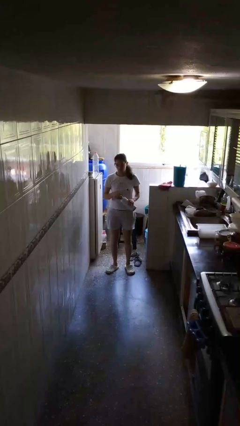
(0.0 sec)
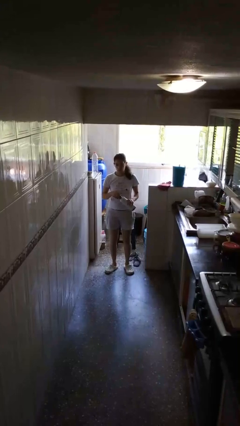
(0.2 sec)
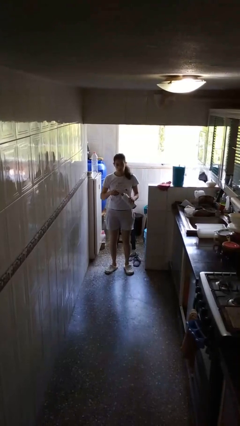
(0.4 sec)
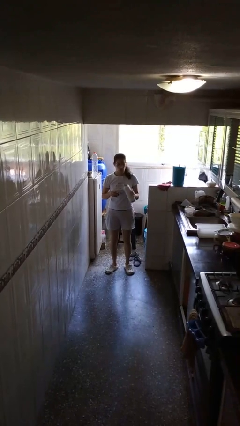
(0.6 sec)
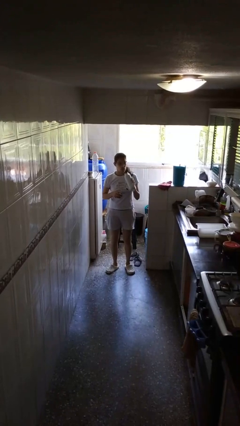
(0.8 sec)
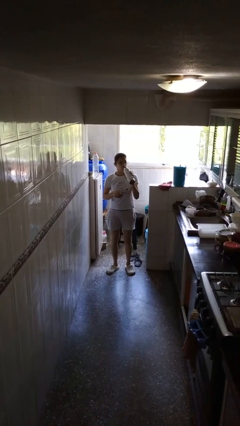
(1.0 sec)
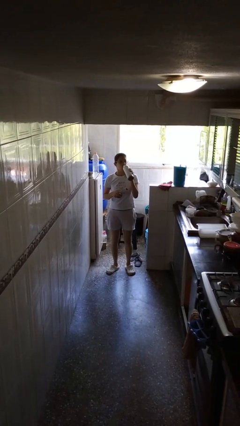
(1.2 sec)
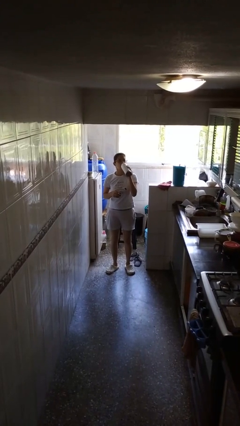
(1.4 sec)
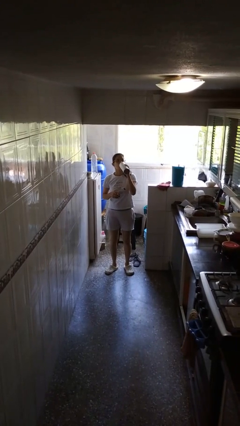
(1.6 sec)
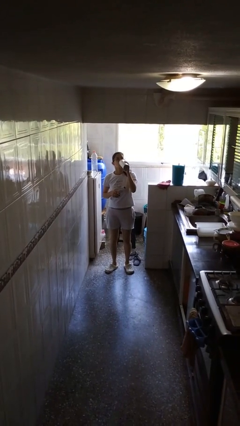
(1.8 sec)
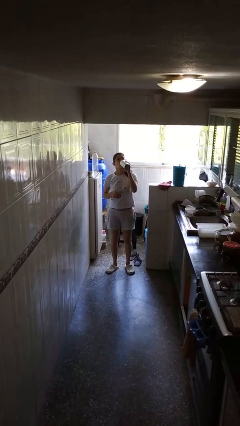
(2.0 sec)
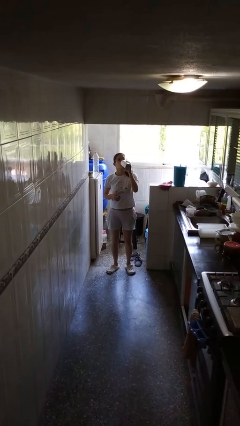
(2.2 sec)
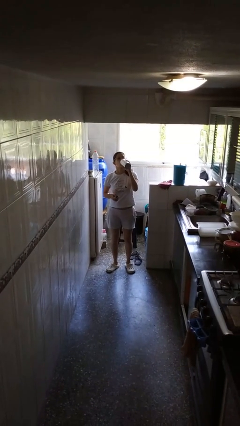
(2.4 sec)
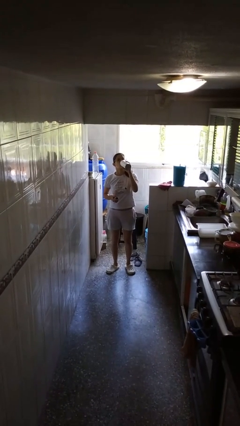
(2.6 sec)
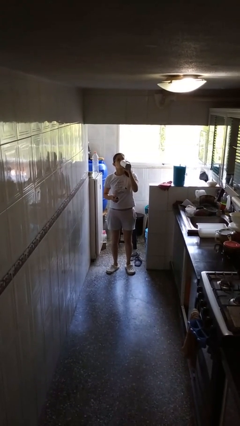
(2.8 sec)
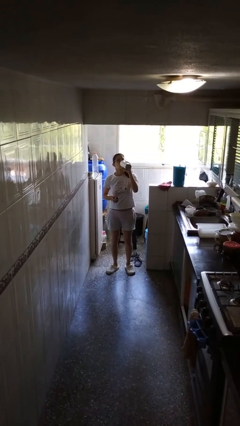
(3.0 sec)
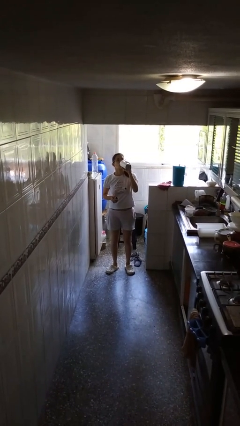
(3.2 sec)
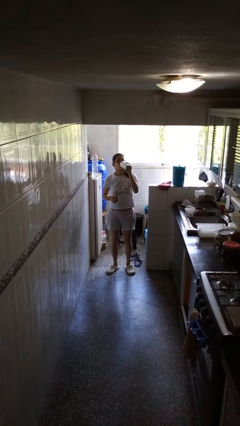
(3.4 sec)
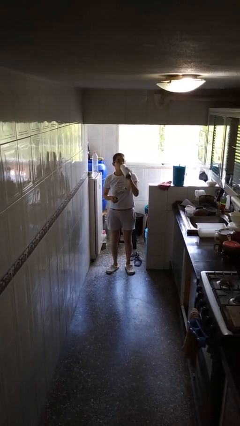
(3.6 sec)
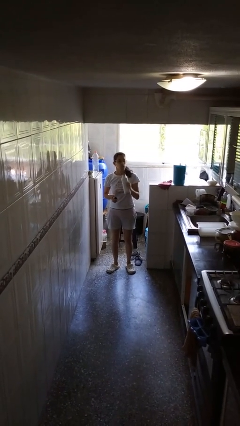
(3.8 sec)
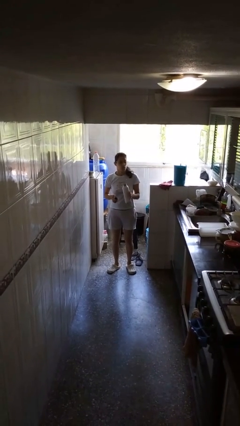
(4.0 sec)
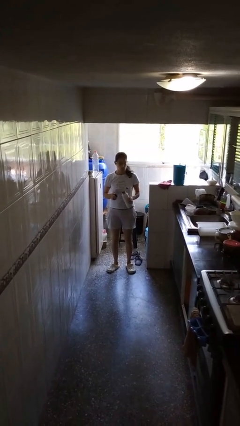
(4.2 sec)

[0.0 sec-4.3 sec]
person drinks from bottle

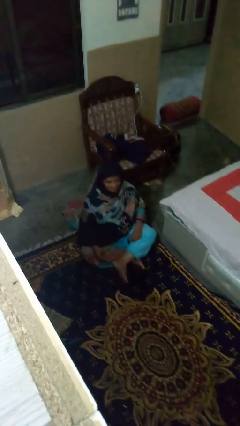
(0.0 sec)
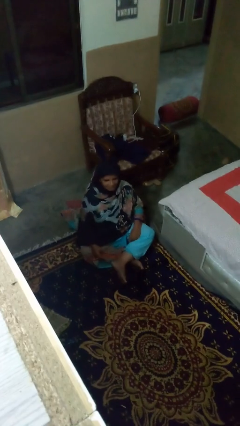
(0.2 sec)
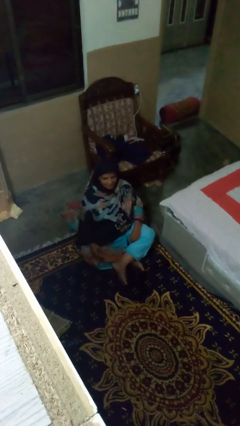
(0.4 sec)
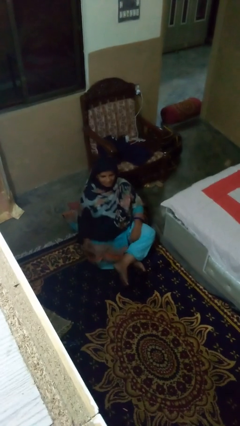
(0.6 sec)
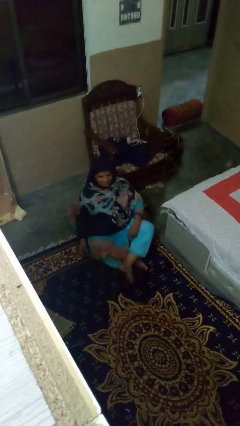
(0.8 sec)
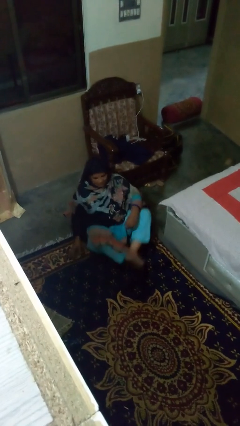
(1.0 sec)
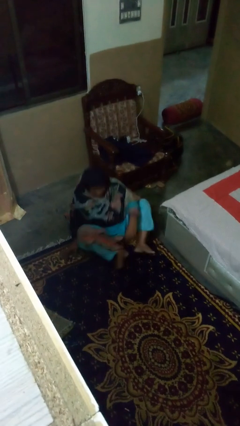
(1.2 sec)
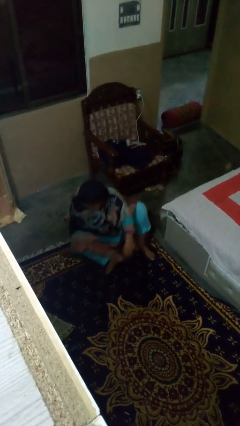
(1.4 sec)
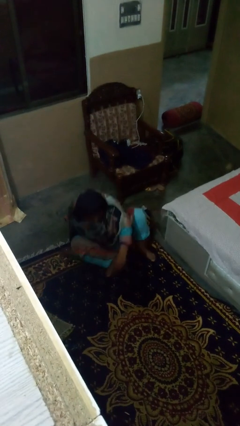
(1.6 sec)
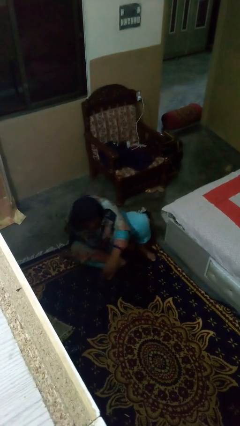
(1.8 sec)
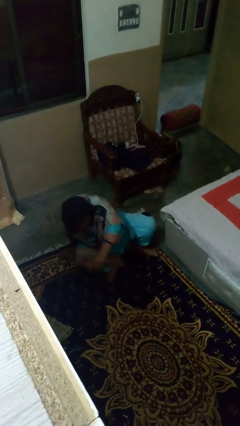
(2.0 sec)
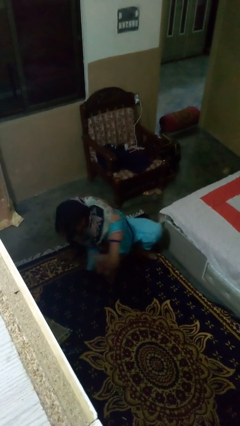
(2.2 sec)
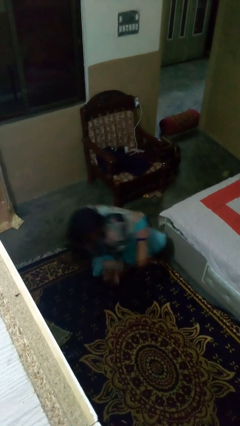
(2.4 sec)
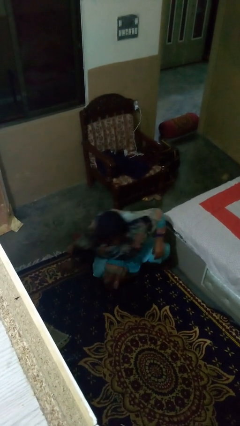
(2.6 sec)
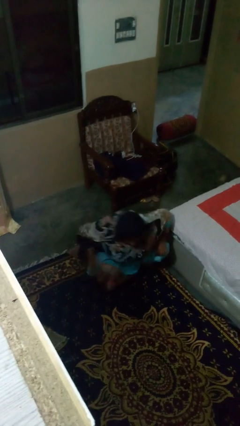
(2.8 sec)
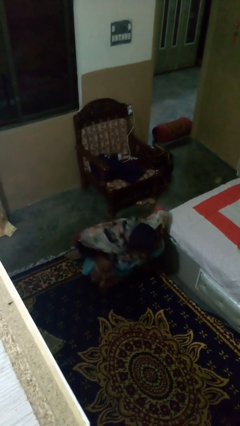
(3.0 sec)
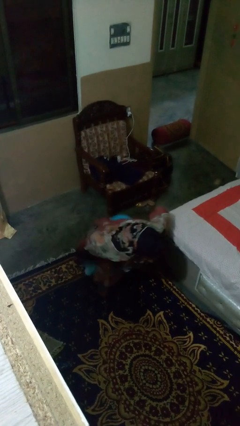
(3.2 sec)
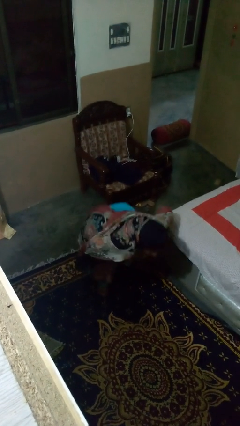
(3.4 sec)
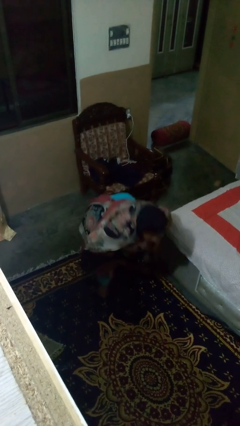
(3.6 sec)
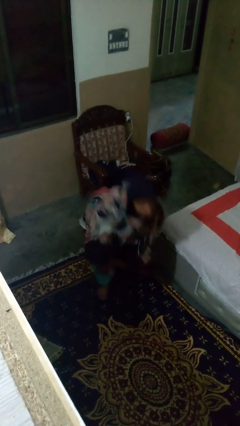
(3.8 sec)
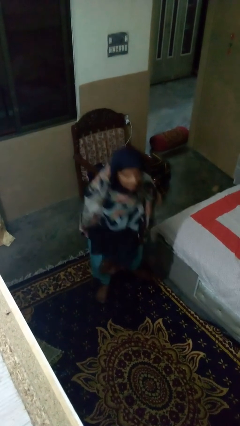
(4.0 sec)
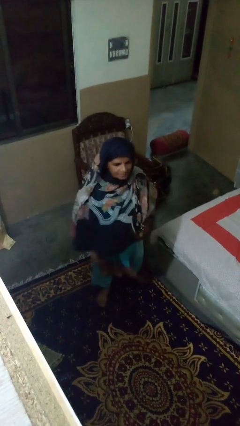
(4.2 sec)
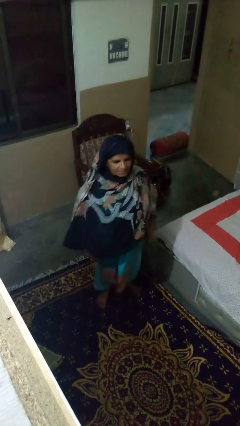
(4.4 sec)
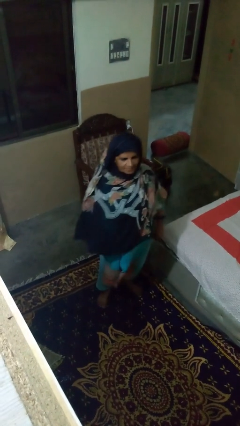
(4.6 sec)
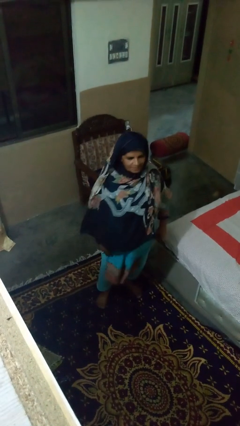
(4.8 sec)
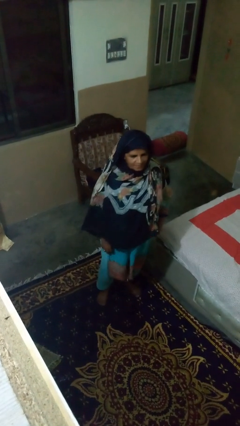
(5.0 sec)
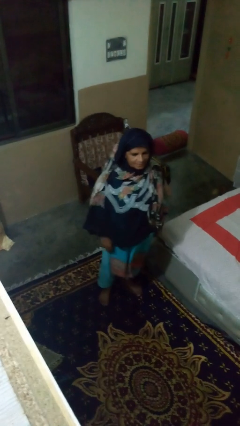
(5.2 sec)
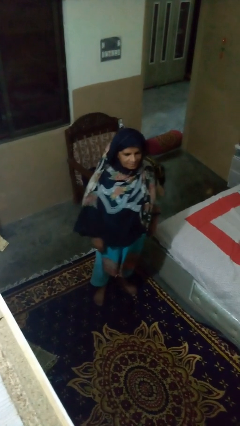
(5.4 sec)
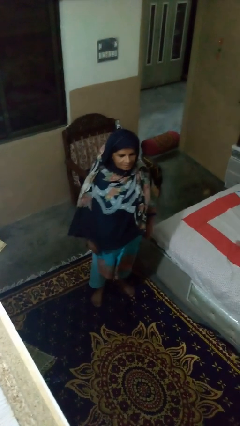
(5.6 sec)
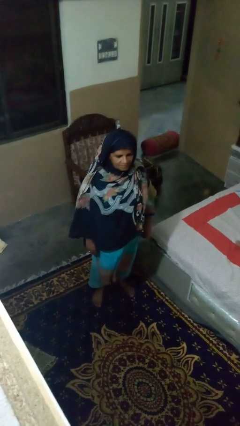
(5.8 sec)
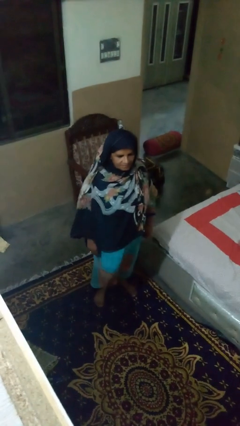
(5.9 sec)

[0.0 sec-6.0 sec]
person stands up from floor

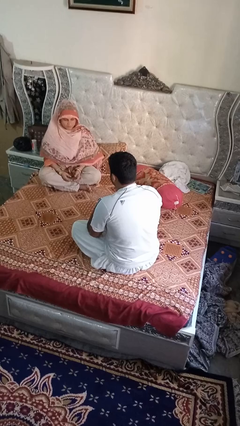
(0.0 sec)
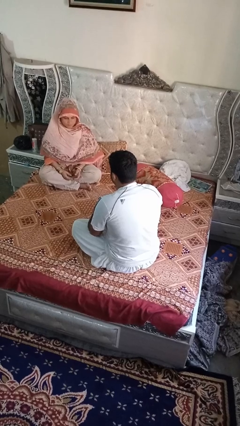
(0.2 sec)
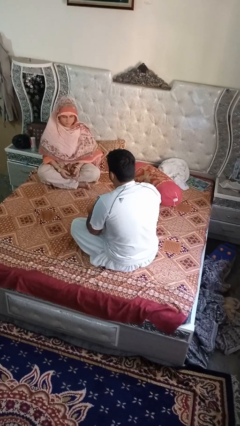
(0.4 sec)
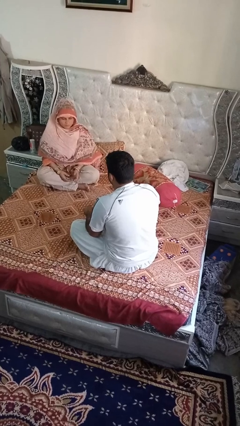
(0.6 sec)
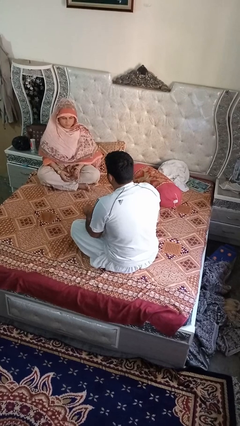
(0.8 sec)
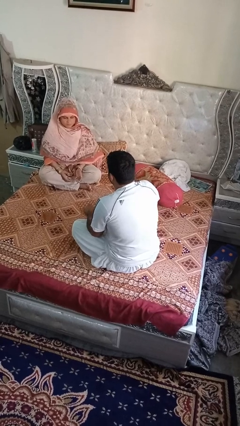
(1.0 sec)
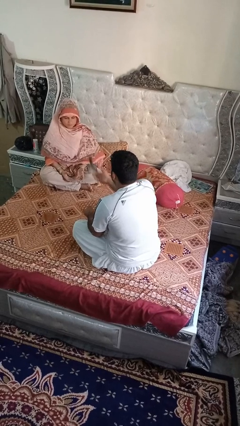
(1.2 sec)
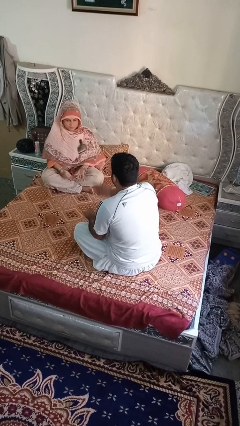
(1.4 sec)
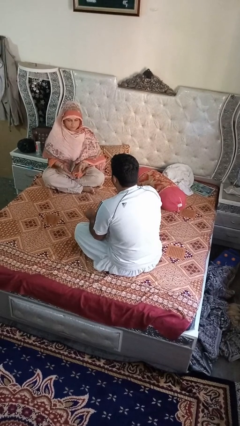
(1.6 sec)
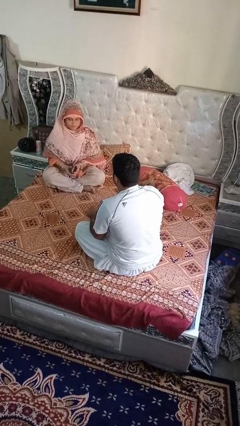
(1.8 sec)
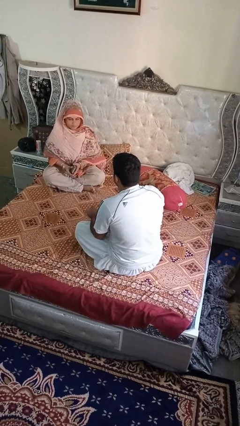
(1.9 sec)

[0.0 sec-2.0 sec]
person throws object to person

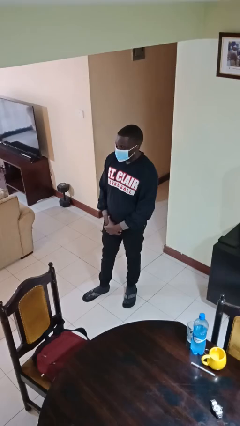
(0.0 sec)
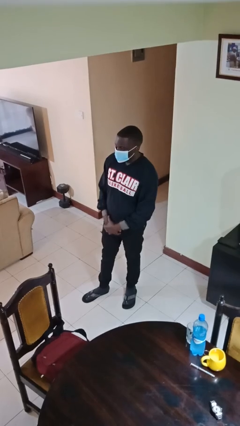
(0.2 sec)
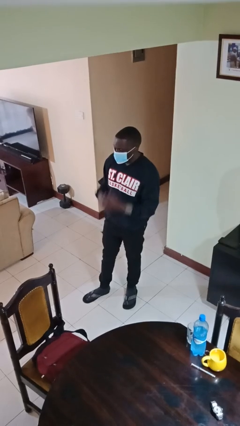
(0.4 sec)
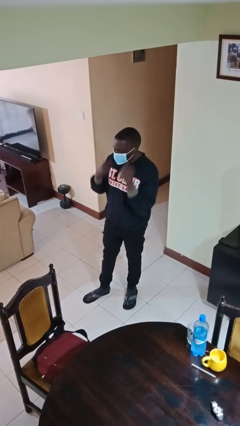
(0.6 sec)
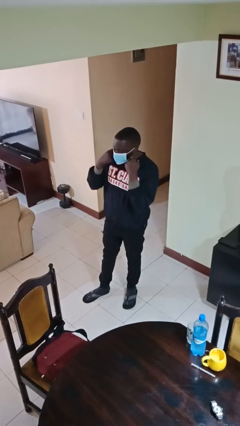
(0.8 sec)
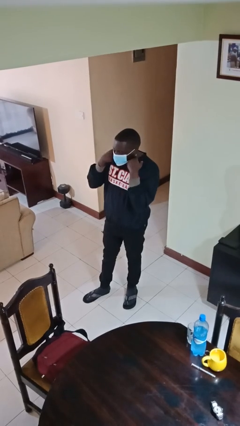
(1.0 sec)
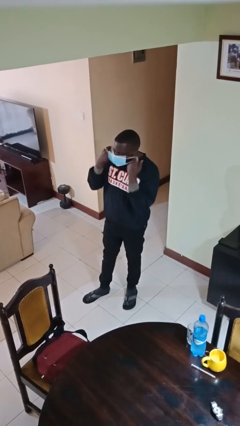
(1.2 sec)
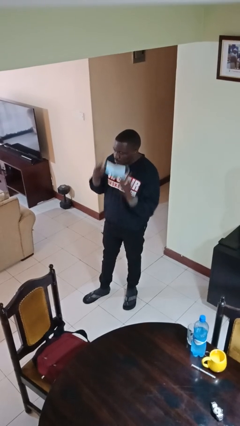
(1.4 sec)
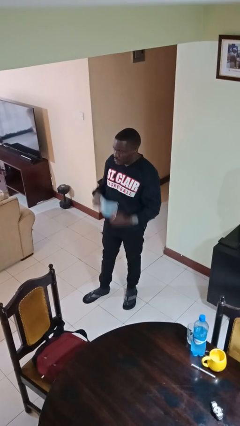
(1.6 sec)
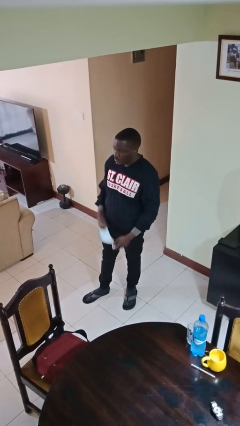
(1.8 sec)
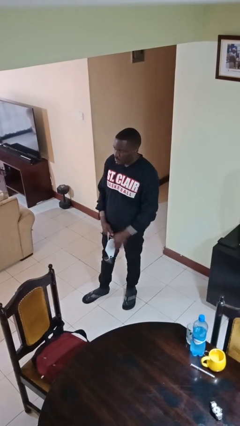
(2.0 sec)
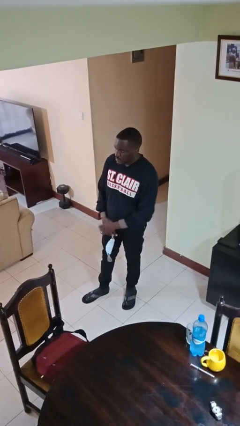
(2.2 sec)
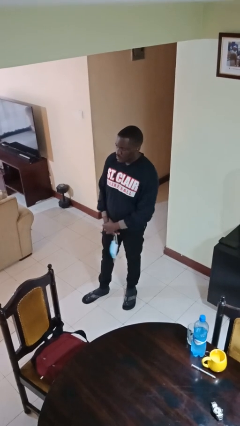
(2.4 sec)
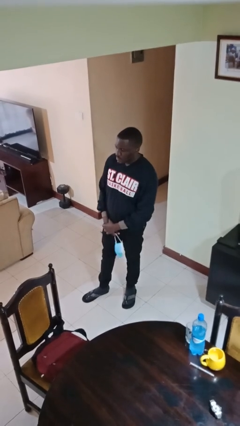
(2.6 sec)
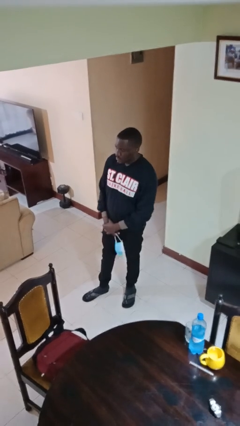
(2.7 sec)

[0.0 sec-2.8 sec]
person takes off facemask

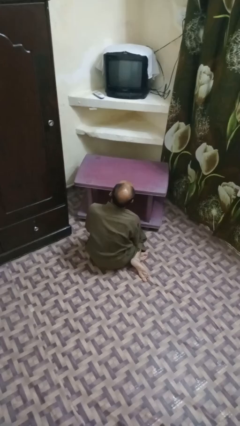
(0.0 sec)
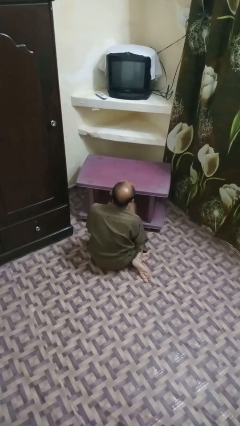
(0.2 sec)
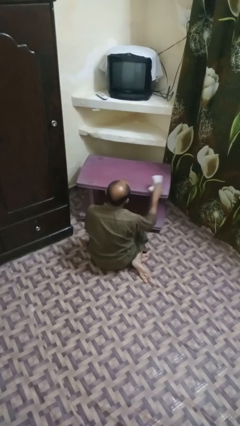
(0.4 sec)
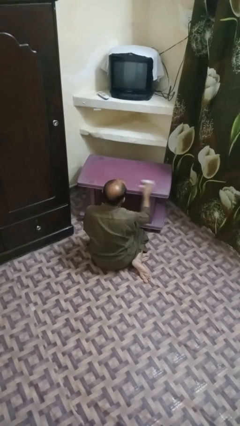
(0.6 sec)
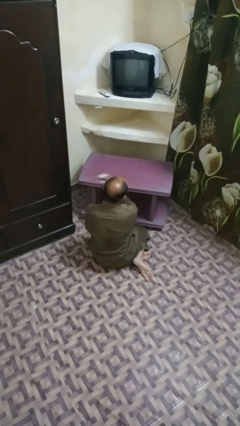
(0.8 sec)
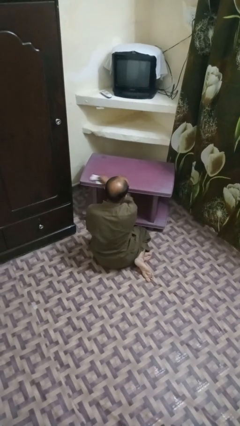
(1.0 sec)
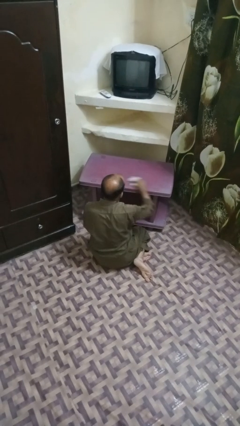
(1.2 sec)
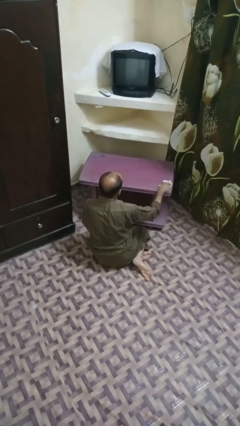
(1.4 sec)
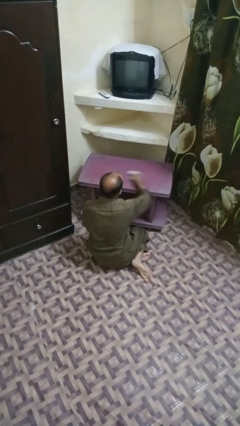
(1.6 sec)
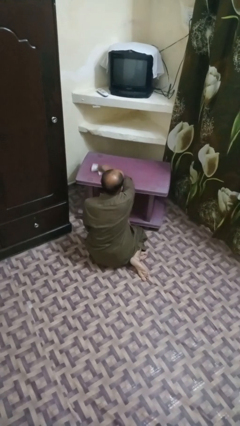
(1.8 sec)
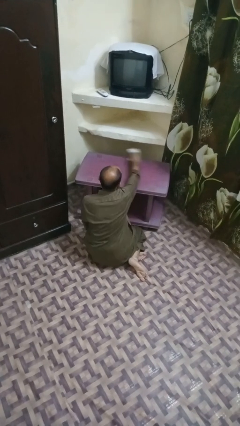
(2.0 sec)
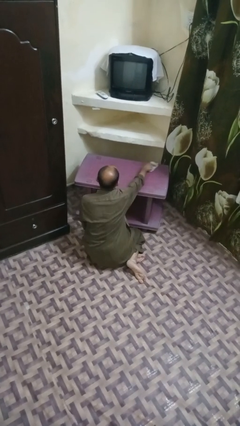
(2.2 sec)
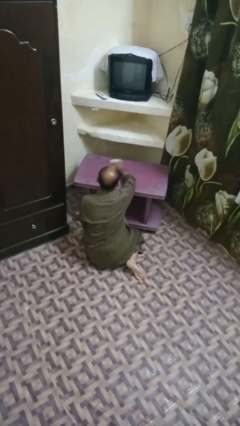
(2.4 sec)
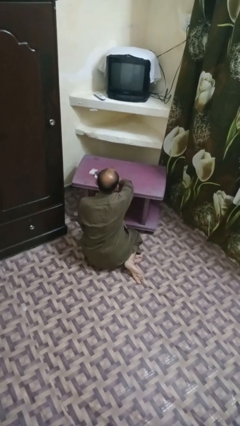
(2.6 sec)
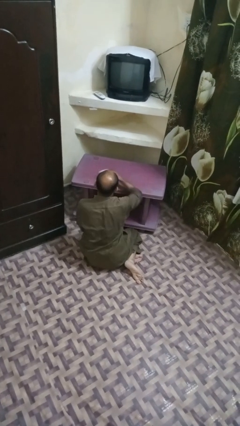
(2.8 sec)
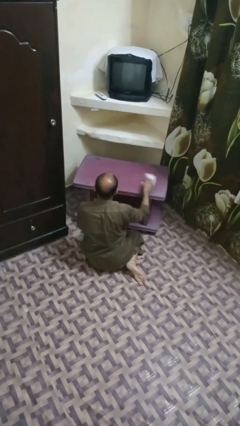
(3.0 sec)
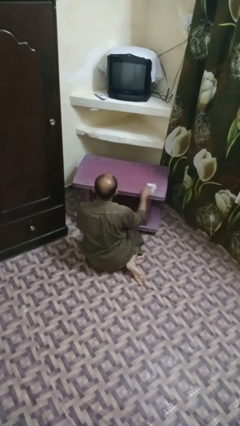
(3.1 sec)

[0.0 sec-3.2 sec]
person cleans table with rag
